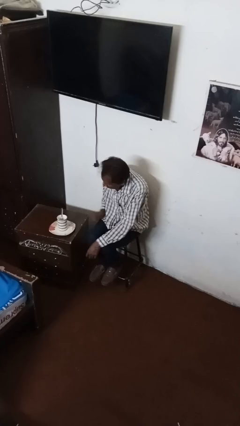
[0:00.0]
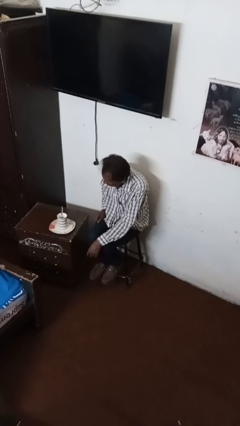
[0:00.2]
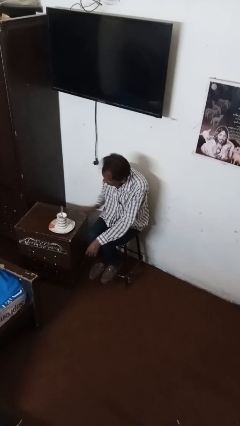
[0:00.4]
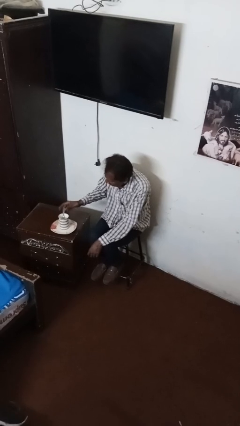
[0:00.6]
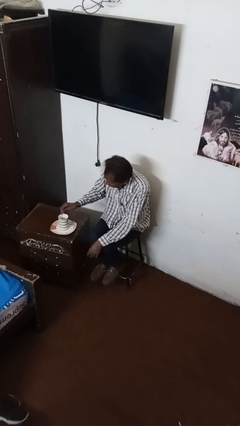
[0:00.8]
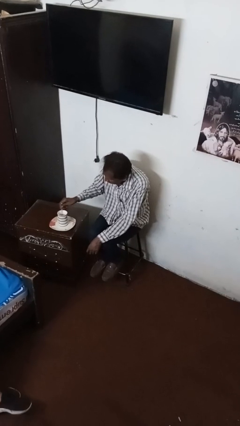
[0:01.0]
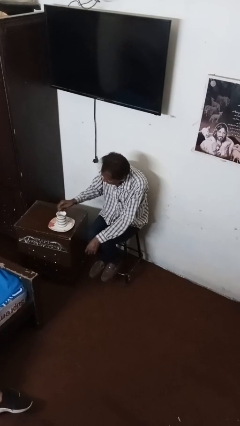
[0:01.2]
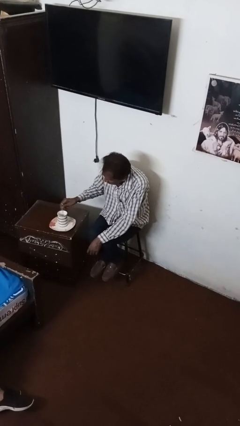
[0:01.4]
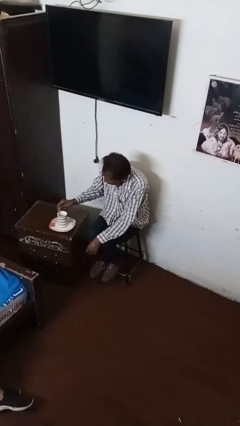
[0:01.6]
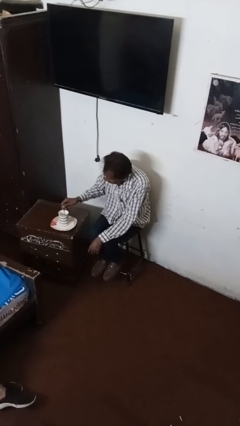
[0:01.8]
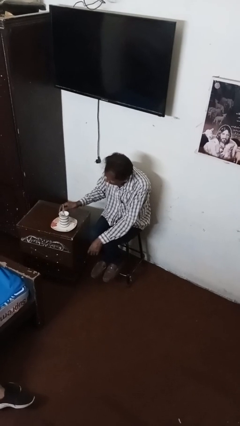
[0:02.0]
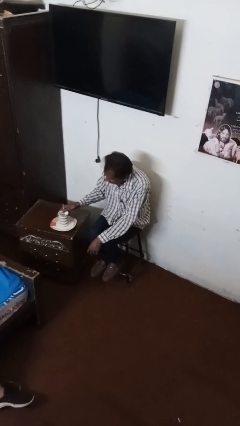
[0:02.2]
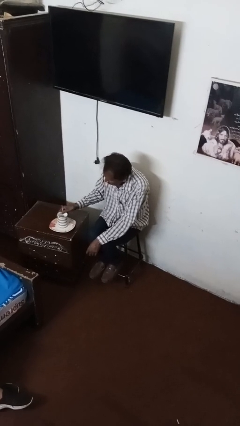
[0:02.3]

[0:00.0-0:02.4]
person stirs mug

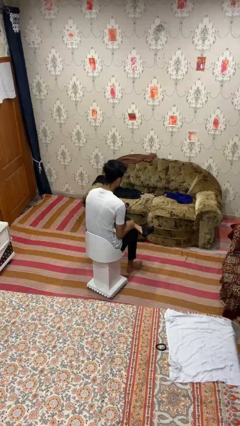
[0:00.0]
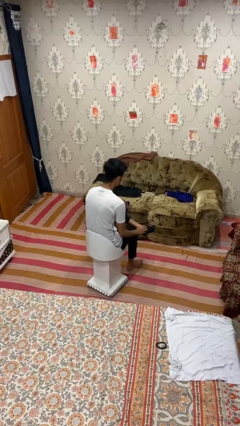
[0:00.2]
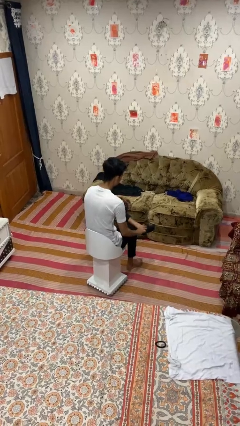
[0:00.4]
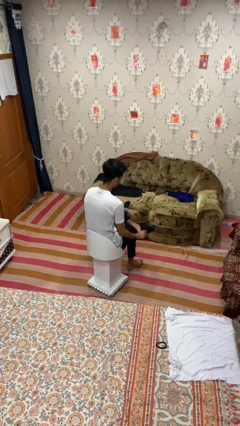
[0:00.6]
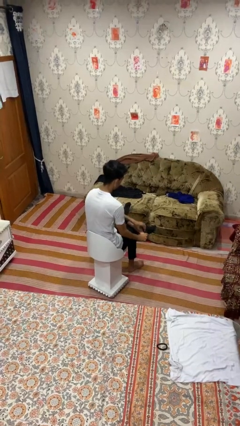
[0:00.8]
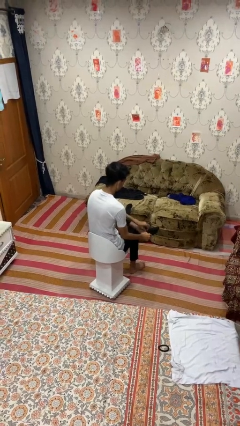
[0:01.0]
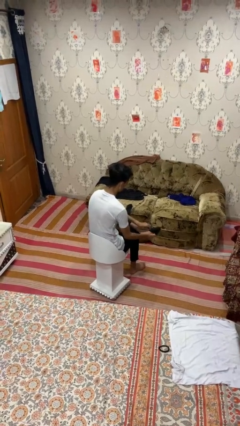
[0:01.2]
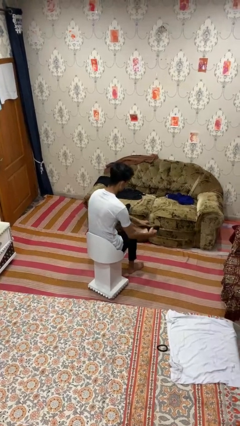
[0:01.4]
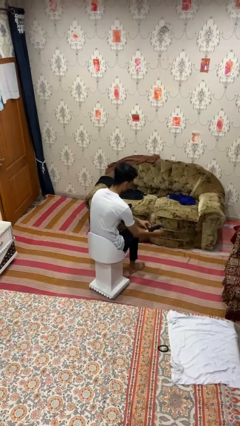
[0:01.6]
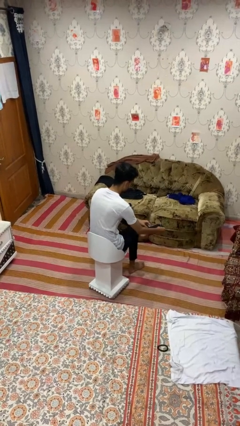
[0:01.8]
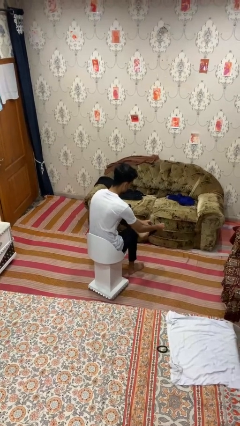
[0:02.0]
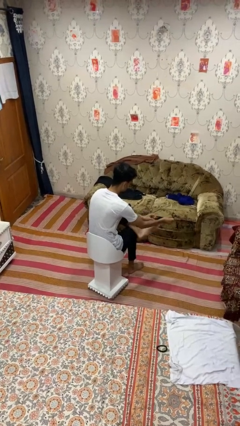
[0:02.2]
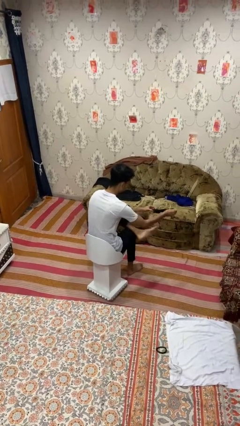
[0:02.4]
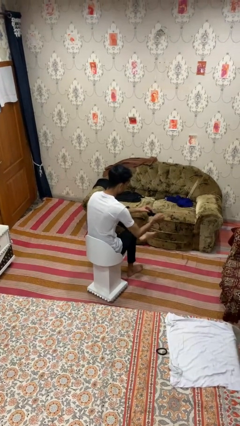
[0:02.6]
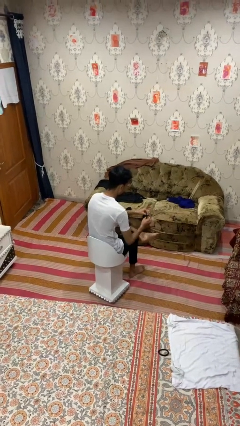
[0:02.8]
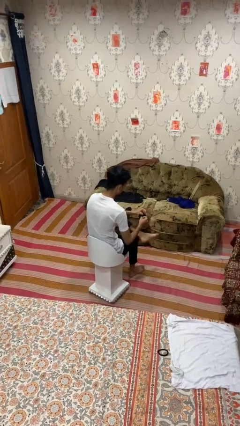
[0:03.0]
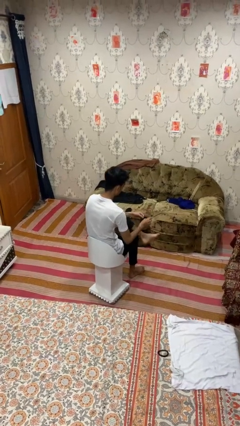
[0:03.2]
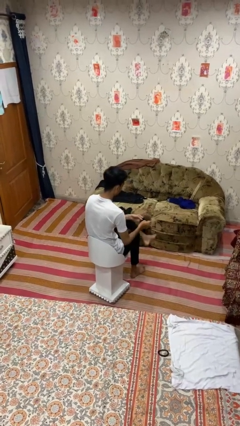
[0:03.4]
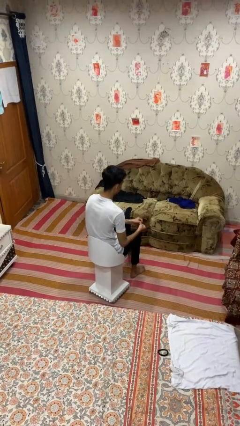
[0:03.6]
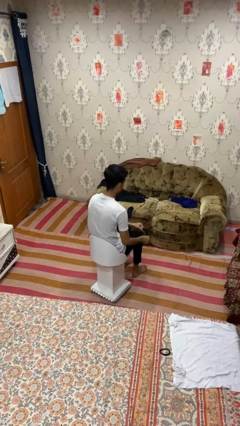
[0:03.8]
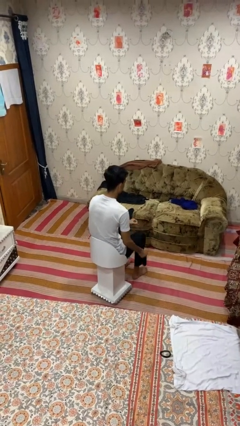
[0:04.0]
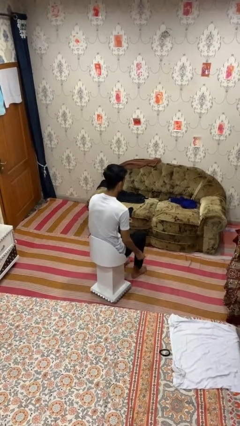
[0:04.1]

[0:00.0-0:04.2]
person takes off socks

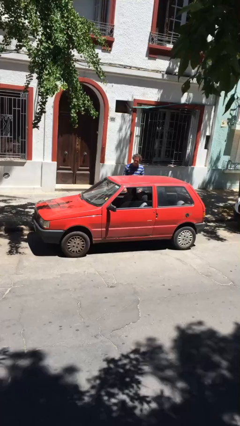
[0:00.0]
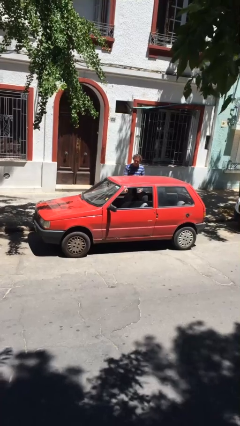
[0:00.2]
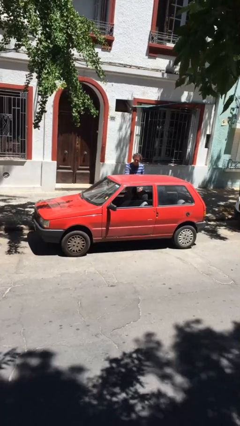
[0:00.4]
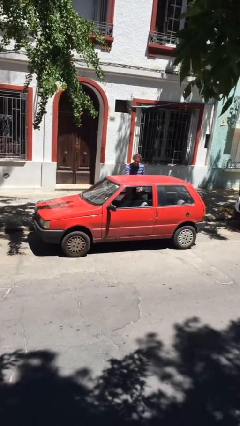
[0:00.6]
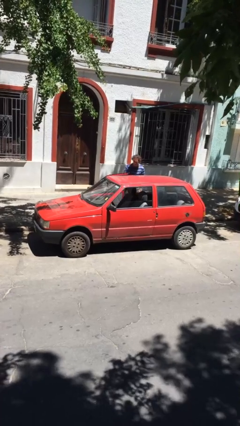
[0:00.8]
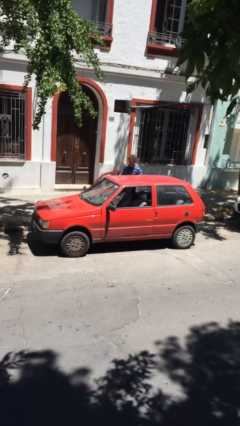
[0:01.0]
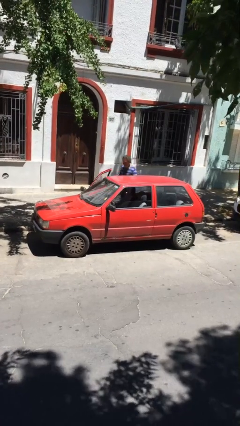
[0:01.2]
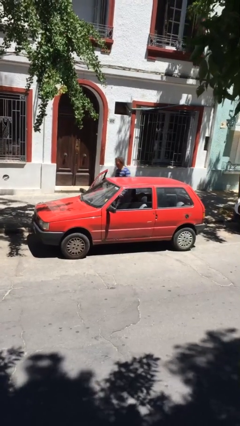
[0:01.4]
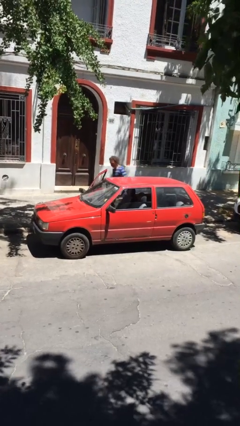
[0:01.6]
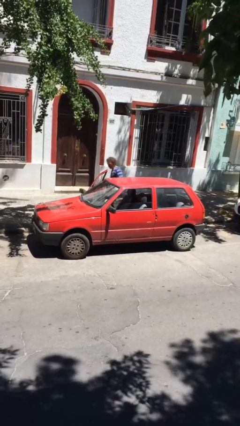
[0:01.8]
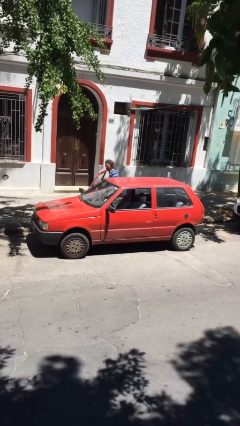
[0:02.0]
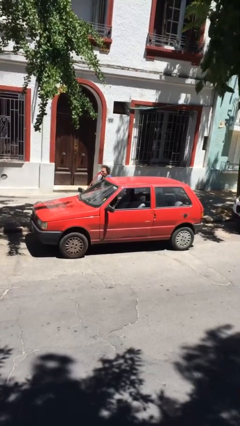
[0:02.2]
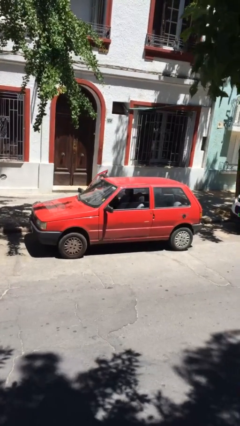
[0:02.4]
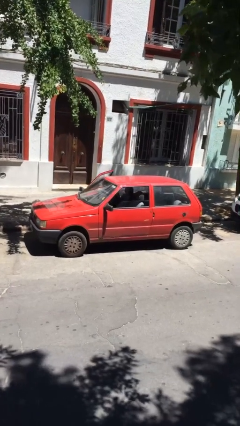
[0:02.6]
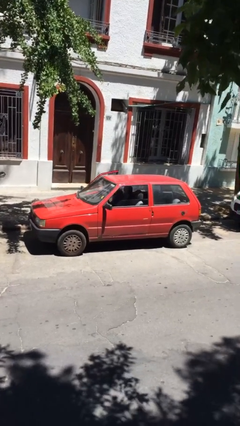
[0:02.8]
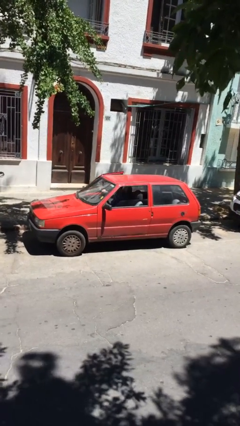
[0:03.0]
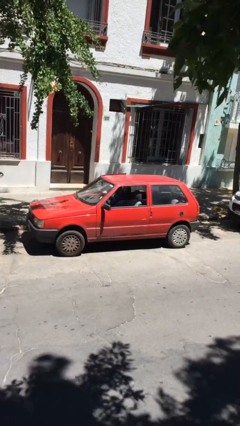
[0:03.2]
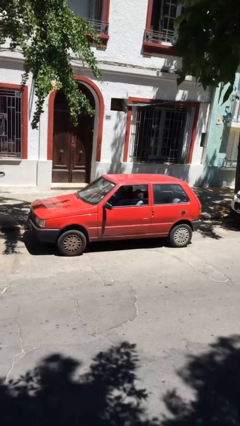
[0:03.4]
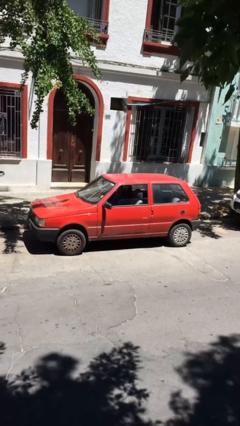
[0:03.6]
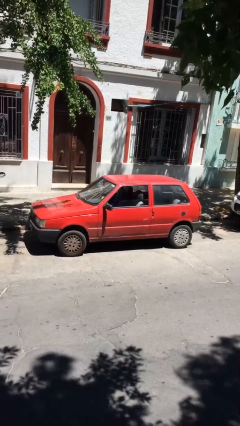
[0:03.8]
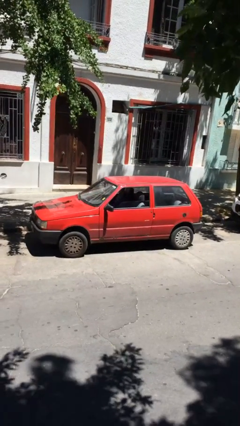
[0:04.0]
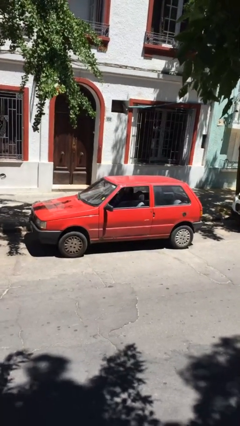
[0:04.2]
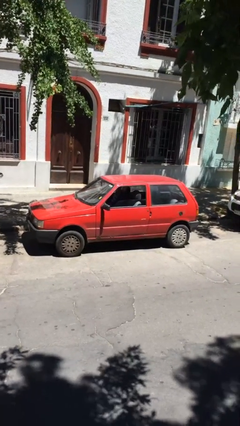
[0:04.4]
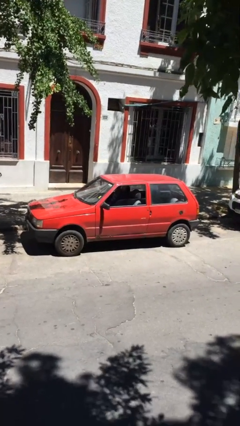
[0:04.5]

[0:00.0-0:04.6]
car picks up person

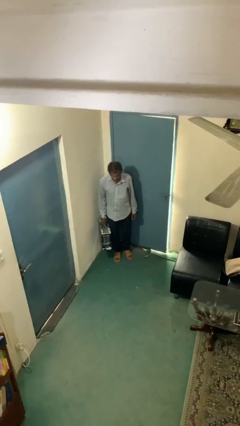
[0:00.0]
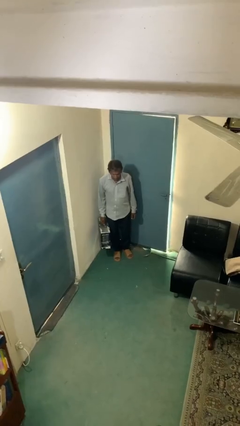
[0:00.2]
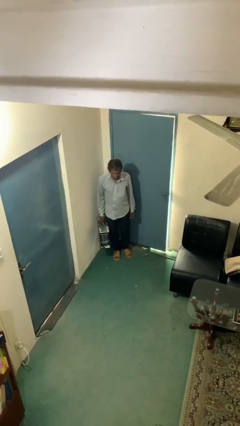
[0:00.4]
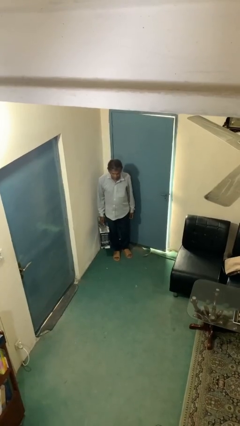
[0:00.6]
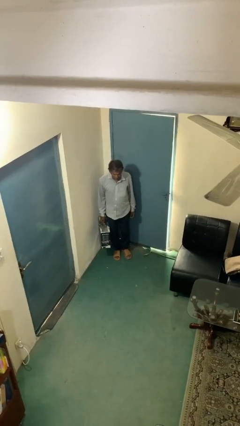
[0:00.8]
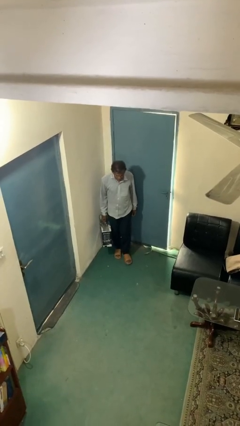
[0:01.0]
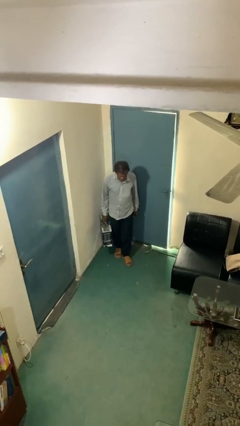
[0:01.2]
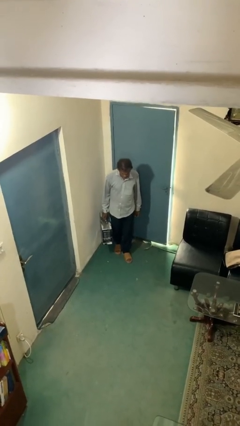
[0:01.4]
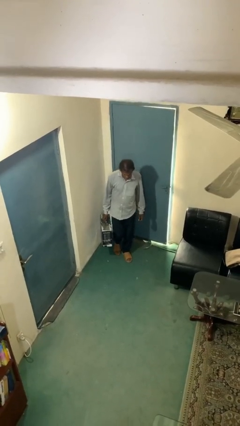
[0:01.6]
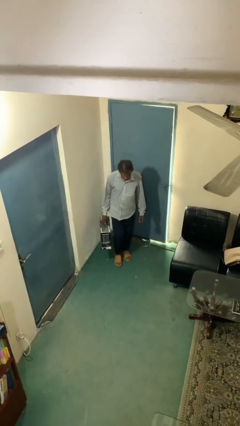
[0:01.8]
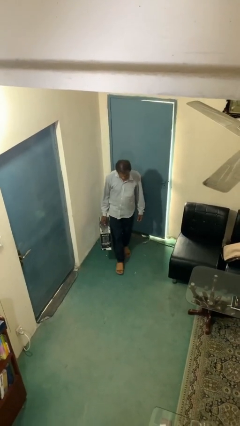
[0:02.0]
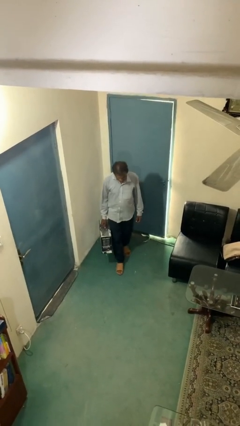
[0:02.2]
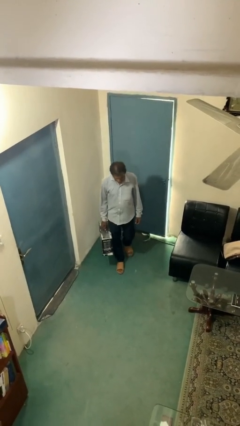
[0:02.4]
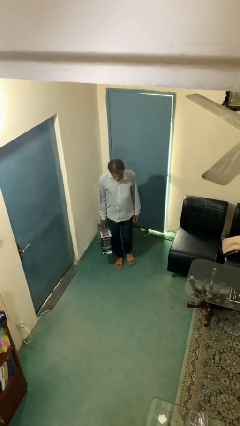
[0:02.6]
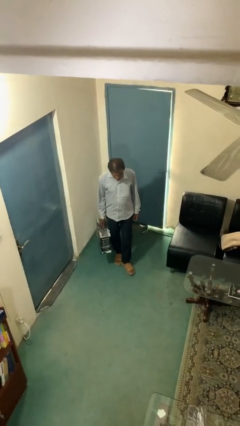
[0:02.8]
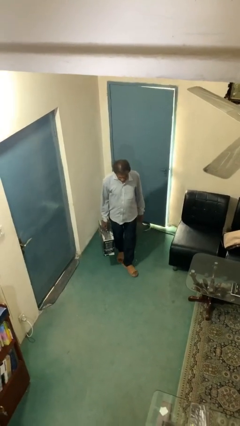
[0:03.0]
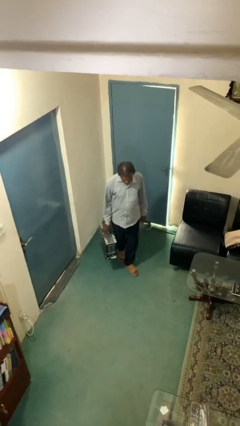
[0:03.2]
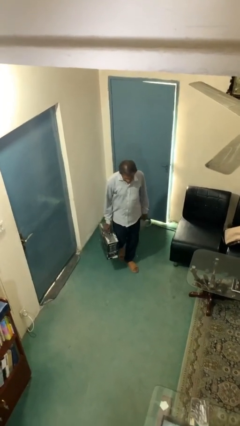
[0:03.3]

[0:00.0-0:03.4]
person carries heavy object

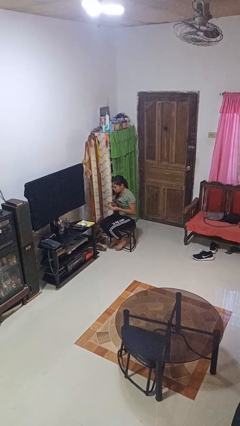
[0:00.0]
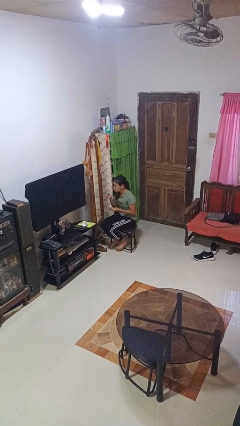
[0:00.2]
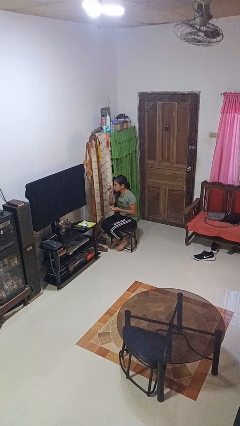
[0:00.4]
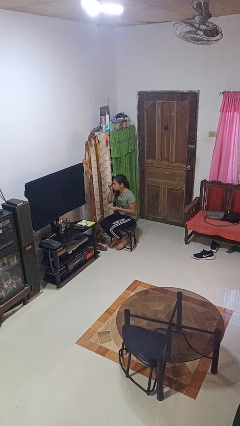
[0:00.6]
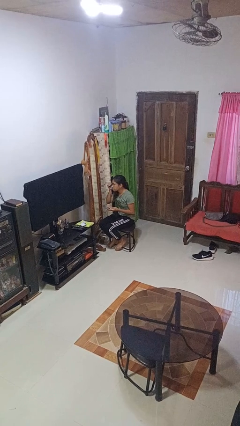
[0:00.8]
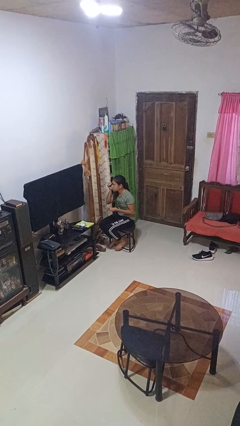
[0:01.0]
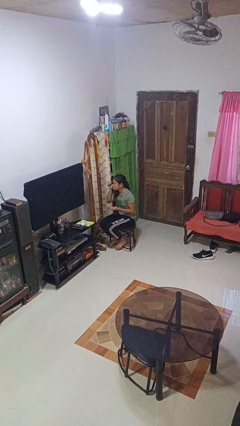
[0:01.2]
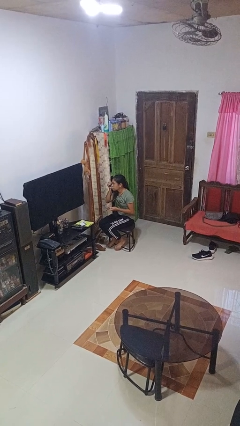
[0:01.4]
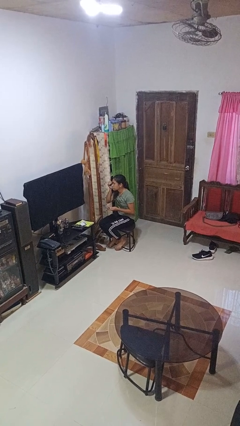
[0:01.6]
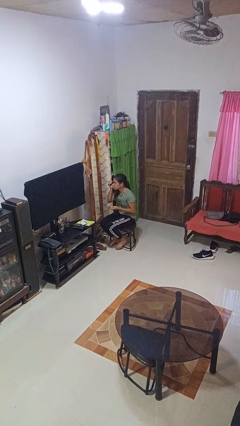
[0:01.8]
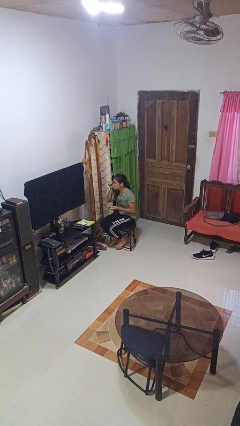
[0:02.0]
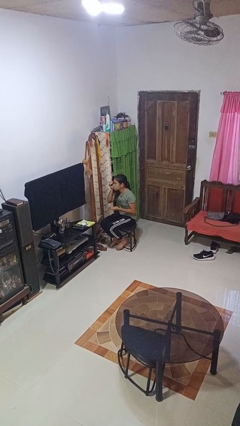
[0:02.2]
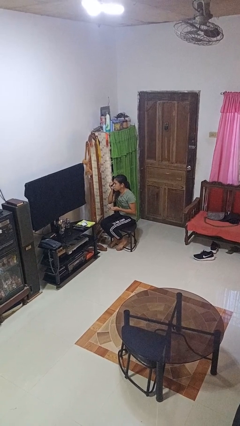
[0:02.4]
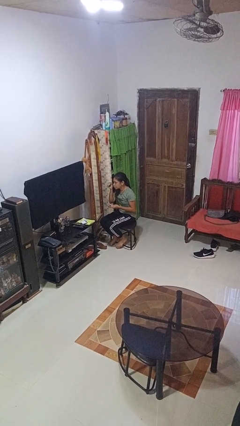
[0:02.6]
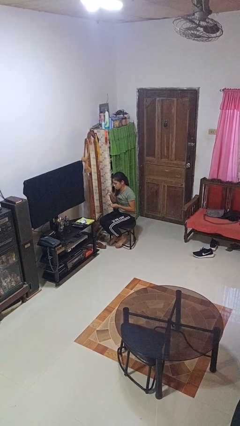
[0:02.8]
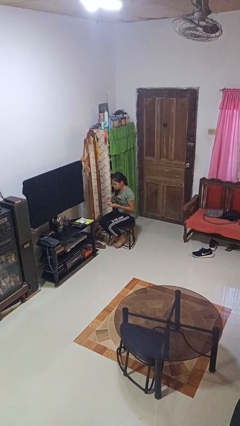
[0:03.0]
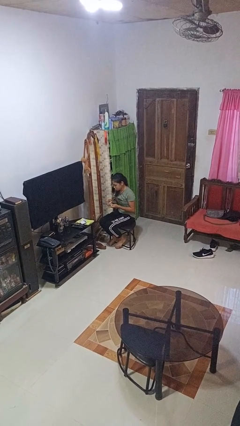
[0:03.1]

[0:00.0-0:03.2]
person applies eye makeup
